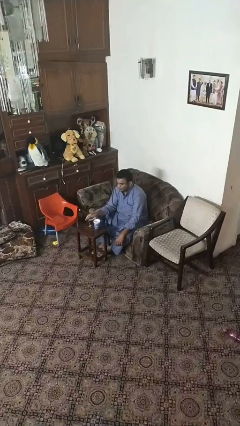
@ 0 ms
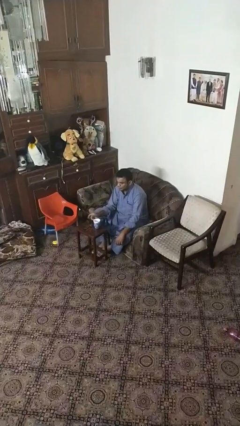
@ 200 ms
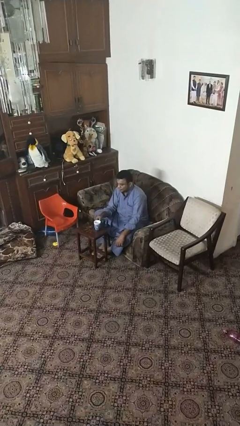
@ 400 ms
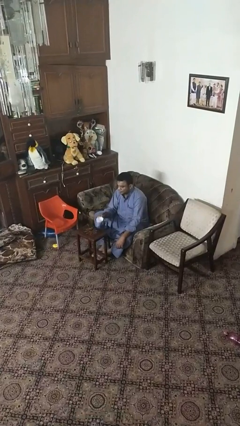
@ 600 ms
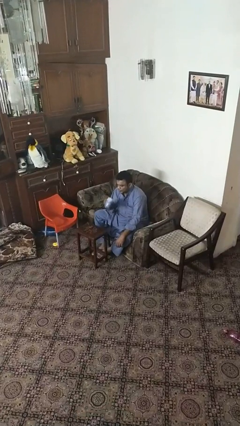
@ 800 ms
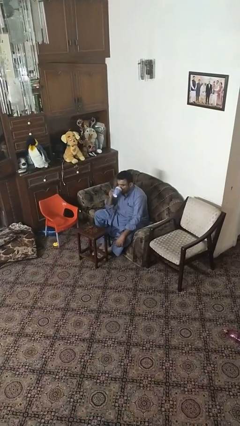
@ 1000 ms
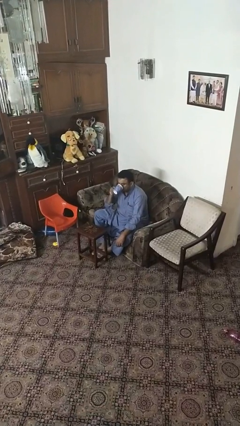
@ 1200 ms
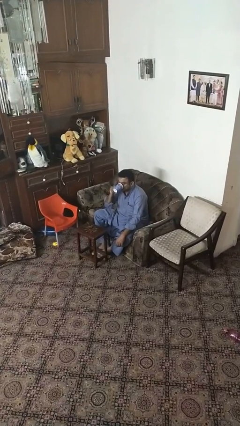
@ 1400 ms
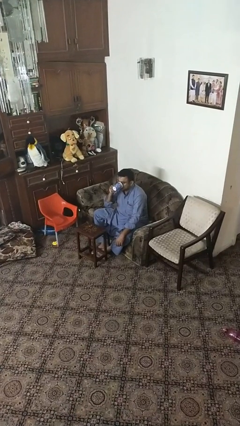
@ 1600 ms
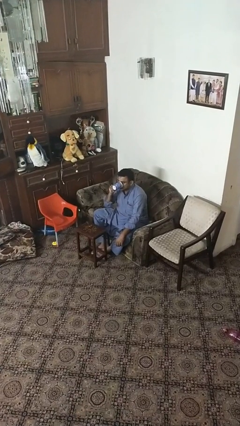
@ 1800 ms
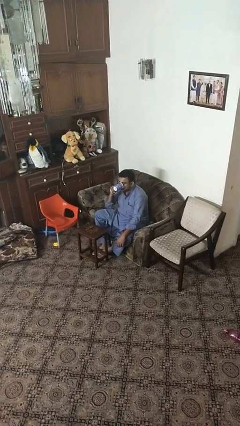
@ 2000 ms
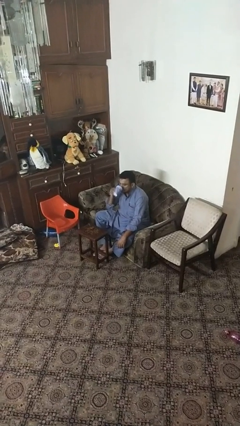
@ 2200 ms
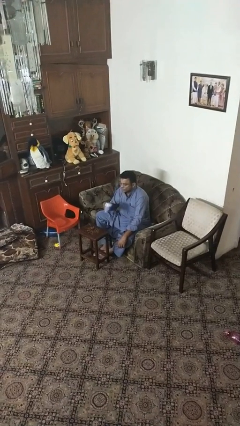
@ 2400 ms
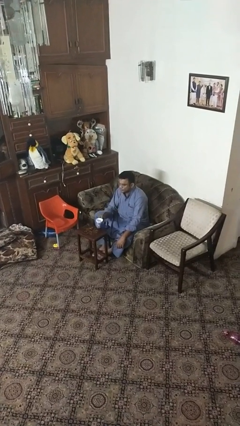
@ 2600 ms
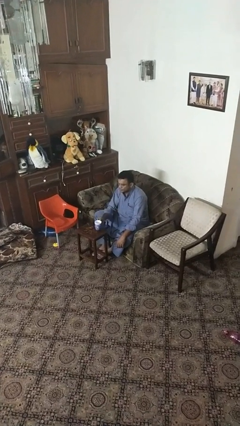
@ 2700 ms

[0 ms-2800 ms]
person drinks from mug

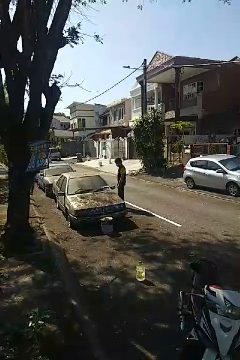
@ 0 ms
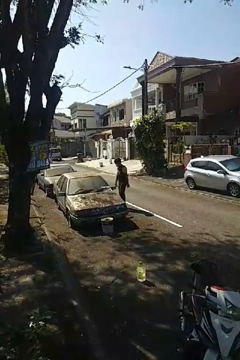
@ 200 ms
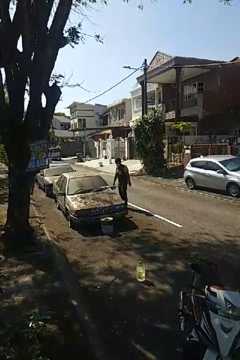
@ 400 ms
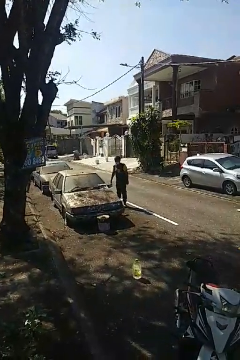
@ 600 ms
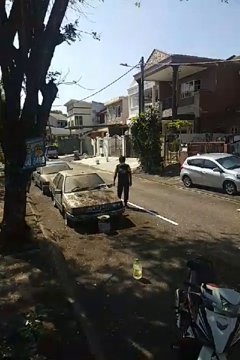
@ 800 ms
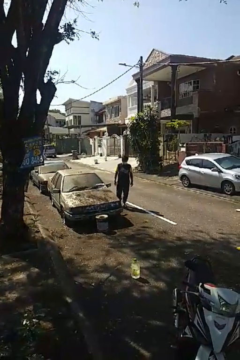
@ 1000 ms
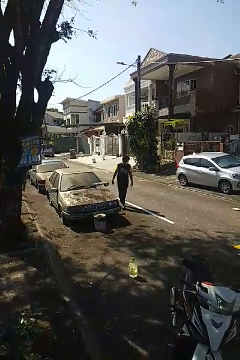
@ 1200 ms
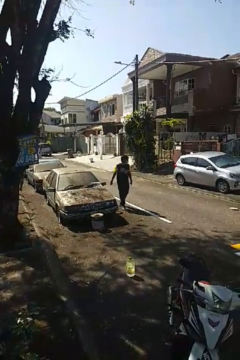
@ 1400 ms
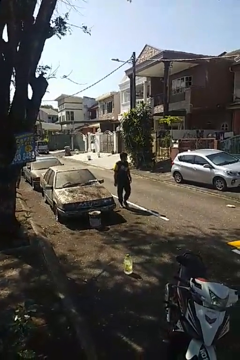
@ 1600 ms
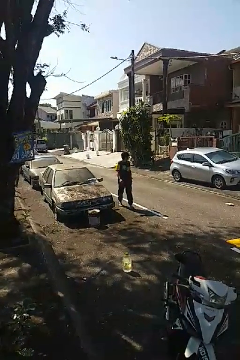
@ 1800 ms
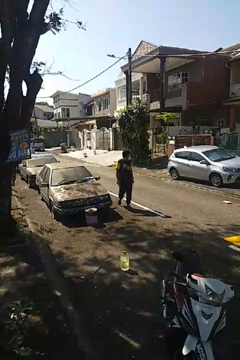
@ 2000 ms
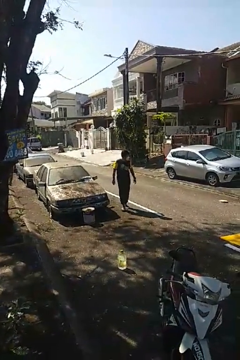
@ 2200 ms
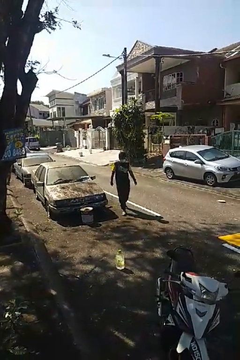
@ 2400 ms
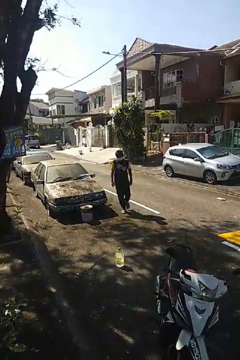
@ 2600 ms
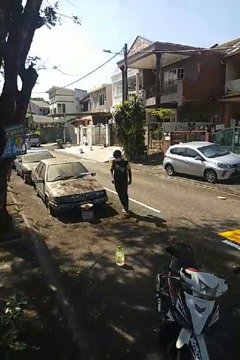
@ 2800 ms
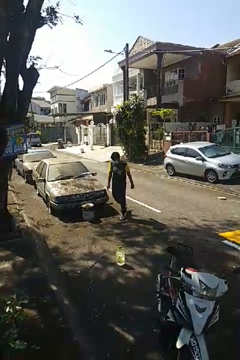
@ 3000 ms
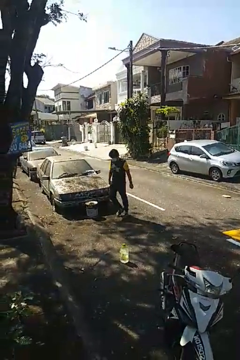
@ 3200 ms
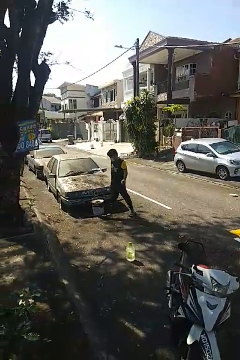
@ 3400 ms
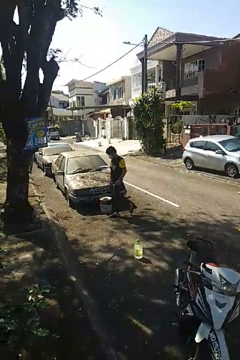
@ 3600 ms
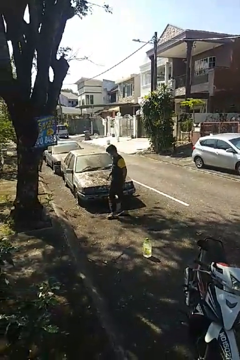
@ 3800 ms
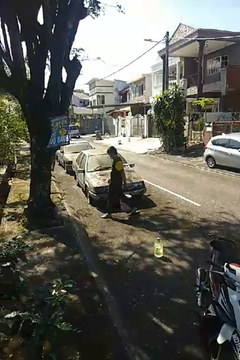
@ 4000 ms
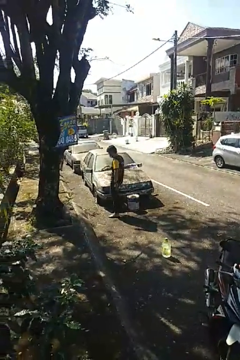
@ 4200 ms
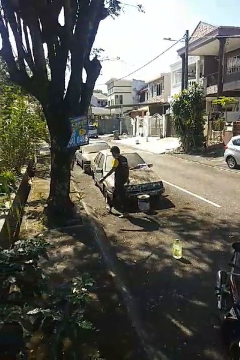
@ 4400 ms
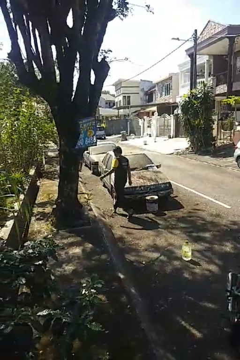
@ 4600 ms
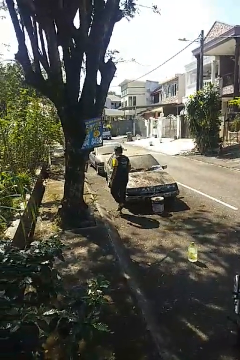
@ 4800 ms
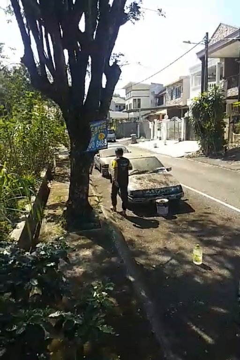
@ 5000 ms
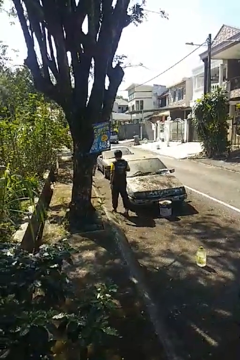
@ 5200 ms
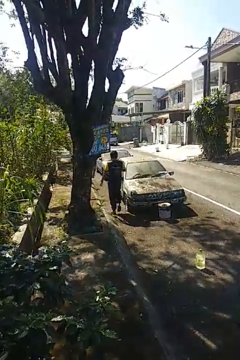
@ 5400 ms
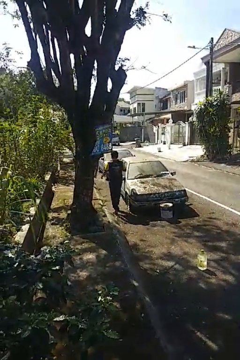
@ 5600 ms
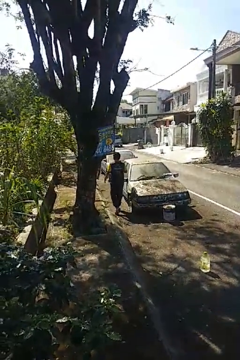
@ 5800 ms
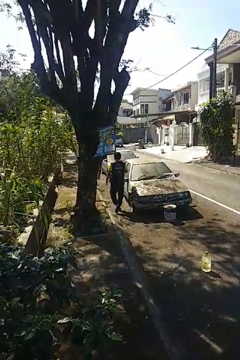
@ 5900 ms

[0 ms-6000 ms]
person walks around car

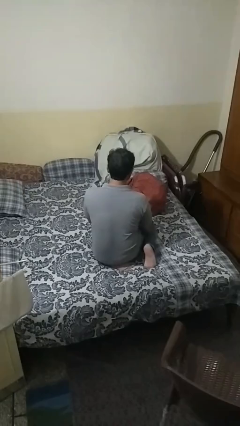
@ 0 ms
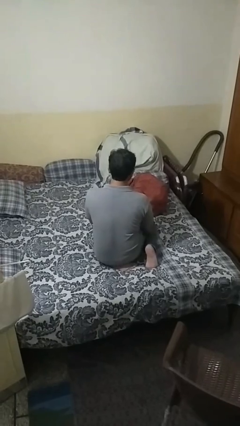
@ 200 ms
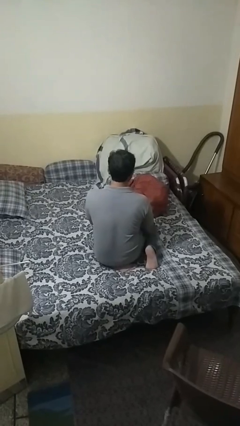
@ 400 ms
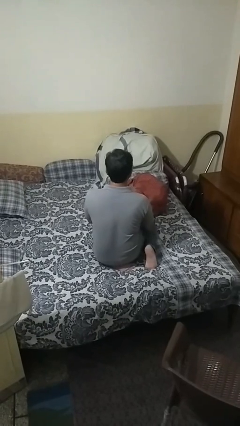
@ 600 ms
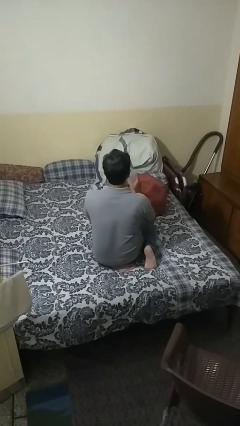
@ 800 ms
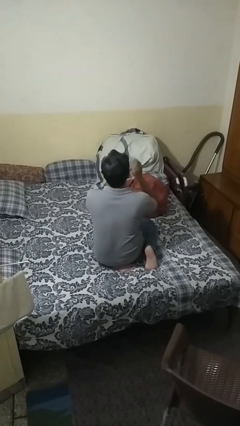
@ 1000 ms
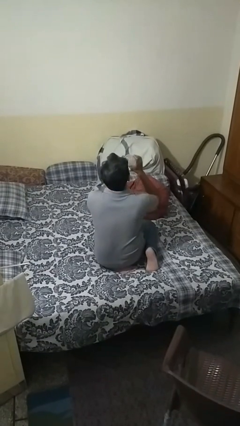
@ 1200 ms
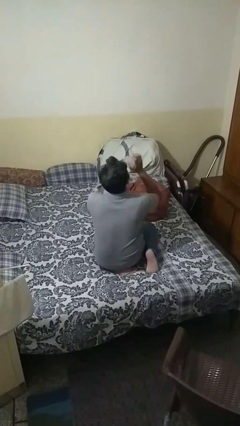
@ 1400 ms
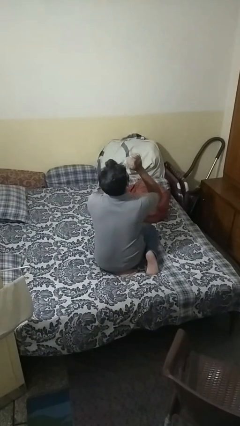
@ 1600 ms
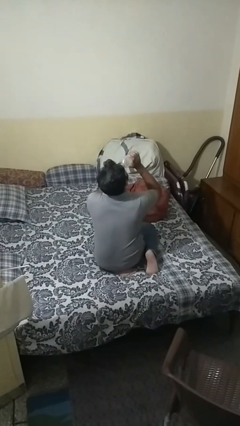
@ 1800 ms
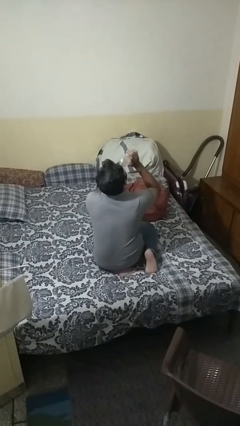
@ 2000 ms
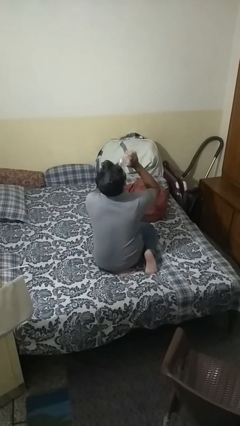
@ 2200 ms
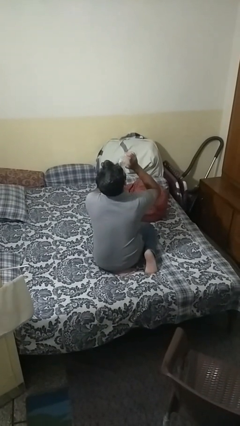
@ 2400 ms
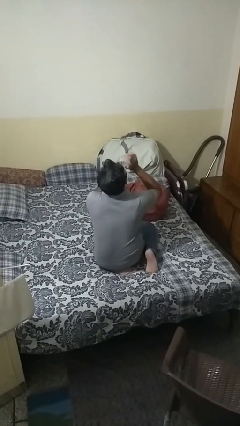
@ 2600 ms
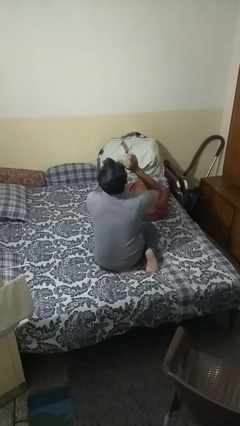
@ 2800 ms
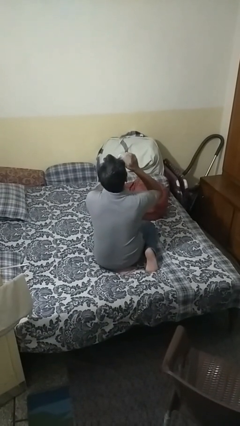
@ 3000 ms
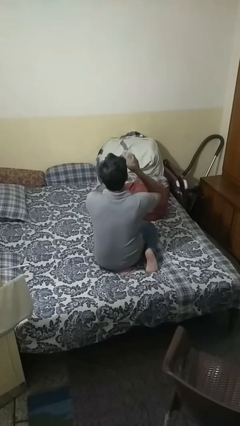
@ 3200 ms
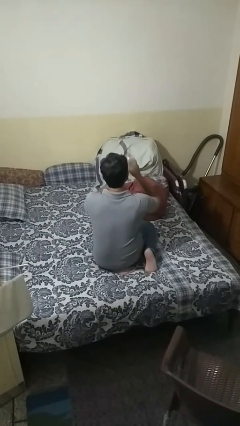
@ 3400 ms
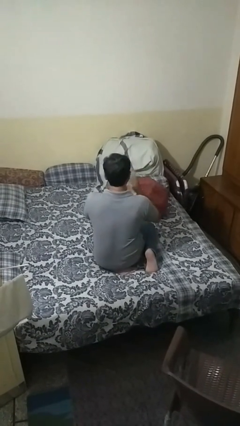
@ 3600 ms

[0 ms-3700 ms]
person drinks from bottle

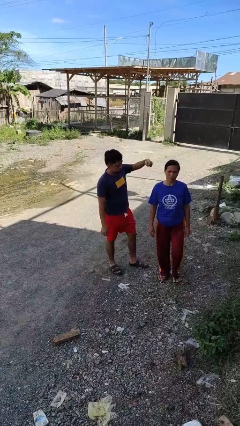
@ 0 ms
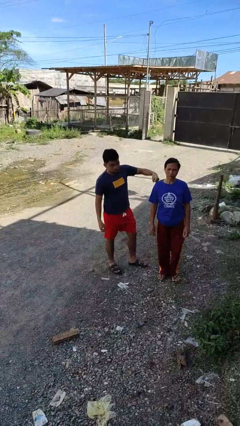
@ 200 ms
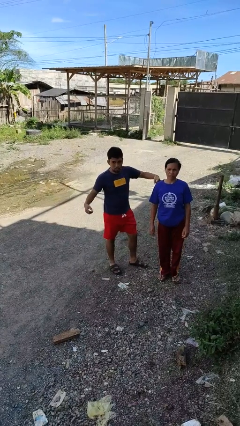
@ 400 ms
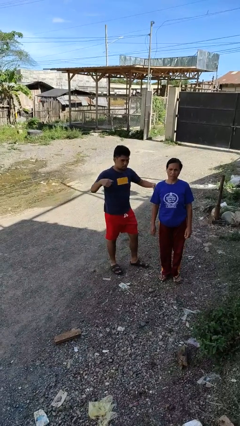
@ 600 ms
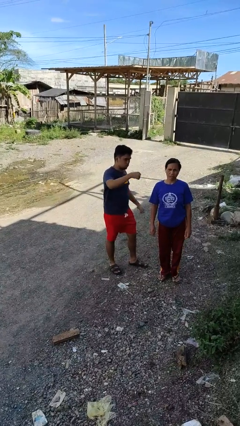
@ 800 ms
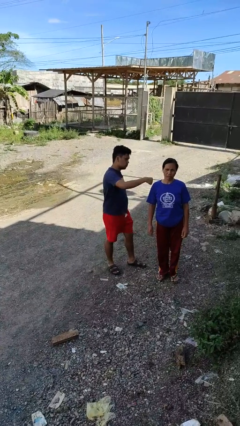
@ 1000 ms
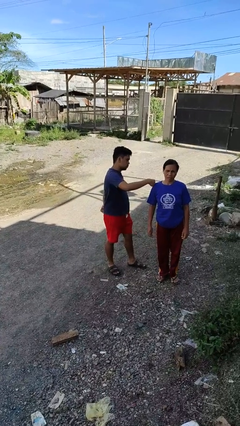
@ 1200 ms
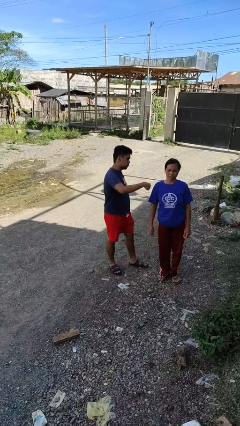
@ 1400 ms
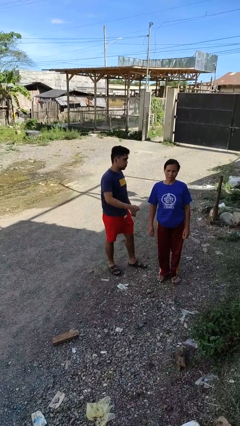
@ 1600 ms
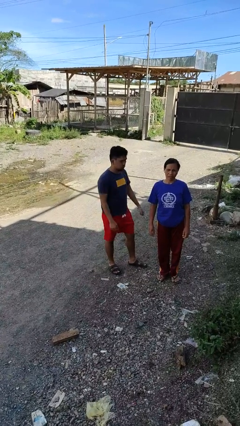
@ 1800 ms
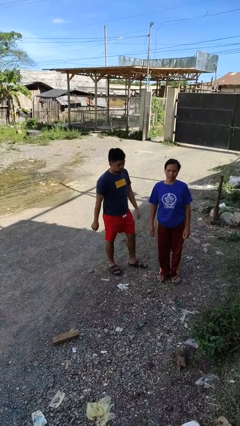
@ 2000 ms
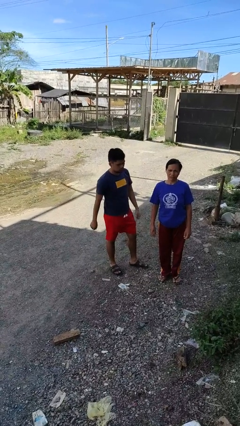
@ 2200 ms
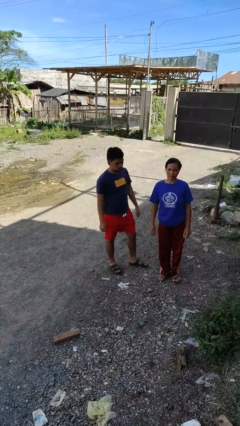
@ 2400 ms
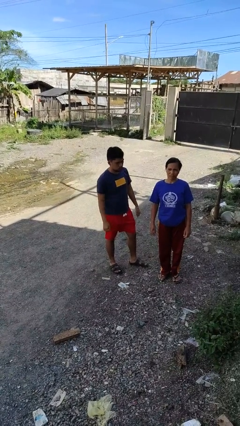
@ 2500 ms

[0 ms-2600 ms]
person pounds shoulders of person

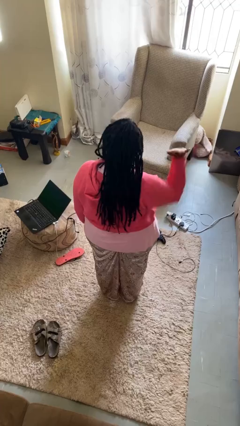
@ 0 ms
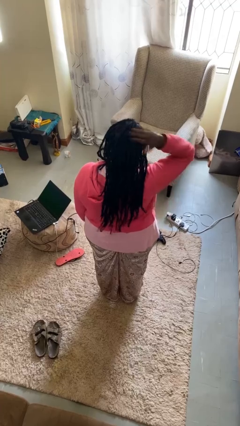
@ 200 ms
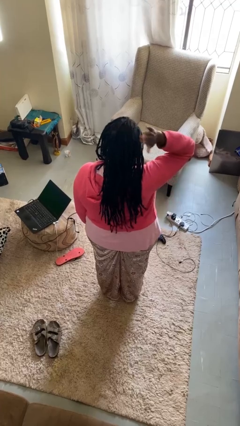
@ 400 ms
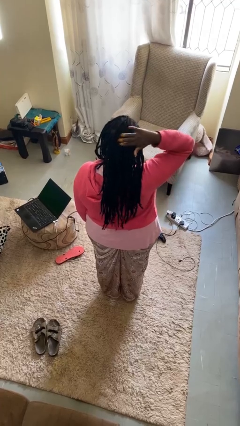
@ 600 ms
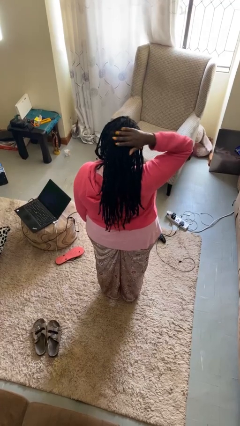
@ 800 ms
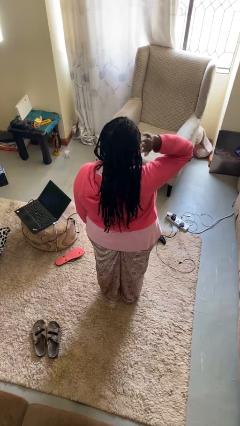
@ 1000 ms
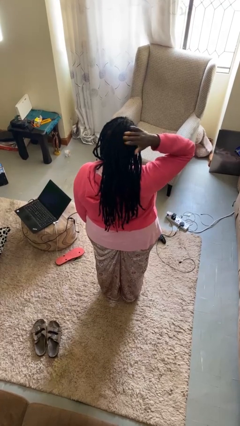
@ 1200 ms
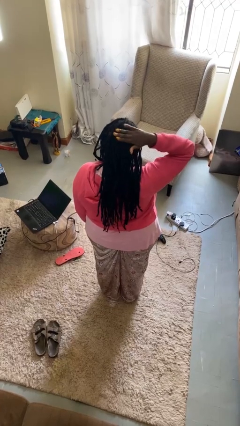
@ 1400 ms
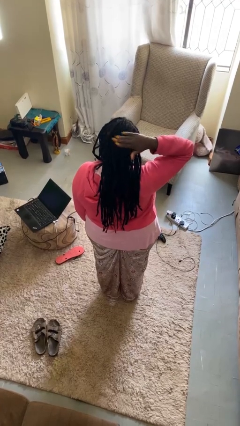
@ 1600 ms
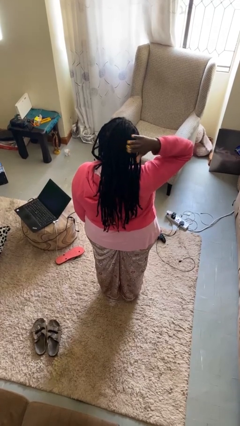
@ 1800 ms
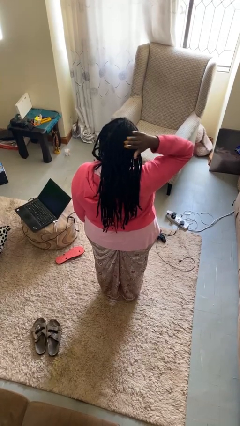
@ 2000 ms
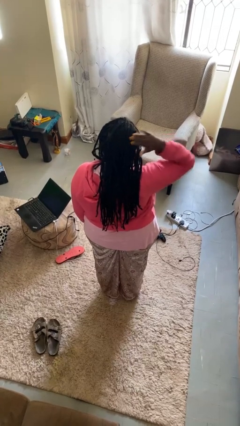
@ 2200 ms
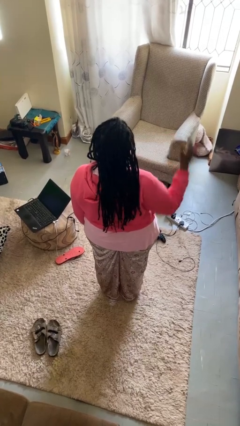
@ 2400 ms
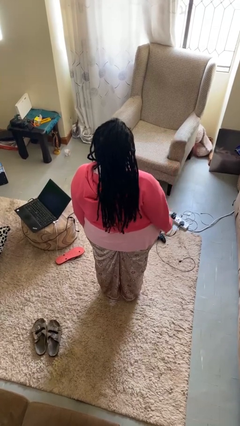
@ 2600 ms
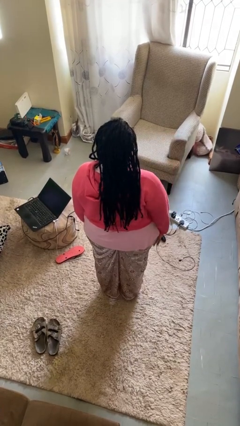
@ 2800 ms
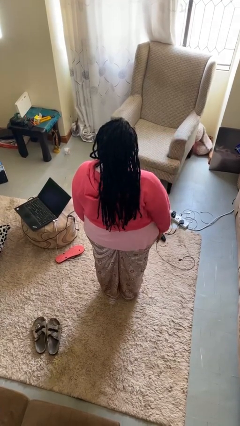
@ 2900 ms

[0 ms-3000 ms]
person pats head
